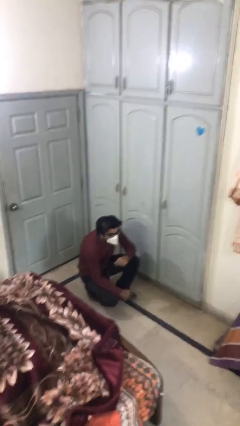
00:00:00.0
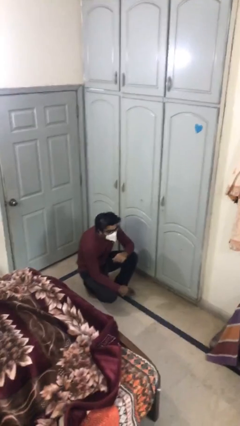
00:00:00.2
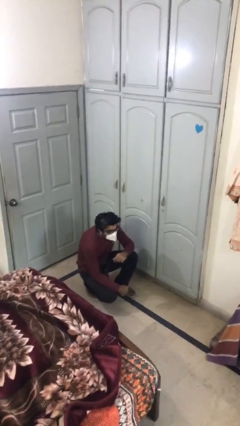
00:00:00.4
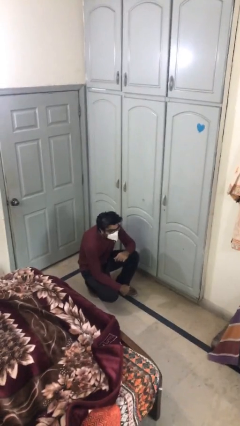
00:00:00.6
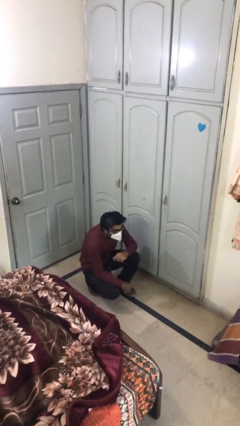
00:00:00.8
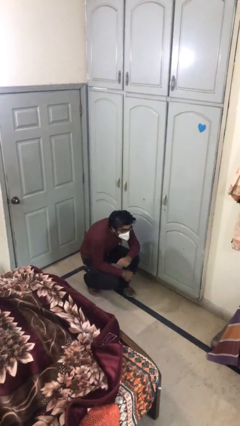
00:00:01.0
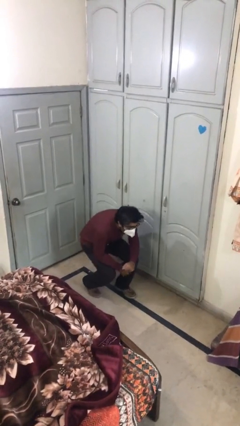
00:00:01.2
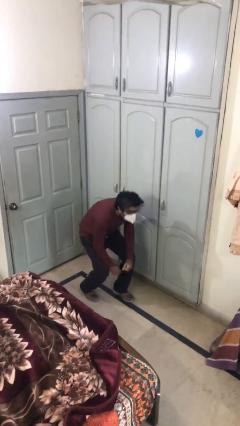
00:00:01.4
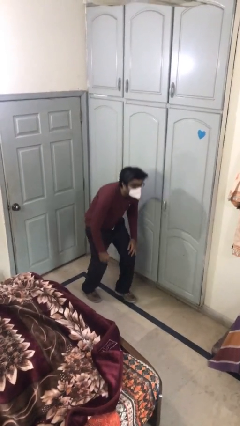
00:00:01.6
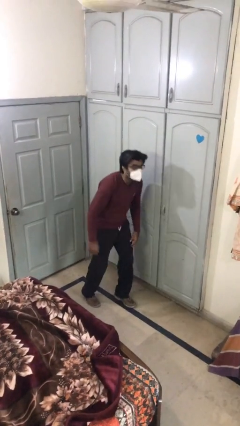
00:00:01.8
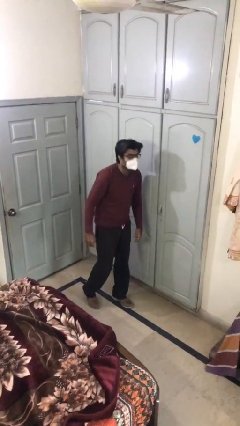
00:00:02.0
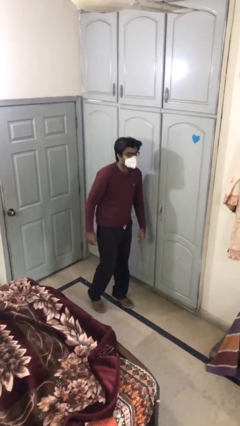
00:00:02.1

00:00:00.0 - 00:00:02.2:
person stands up

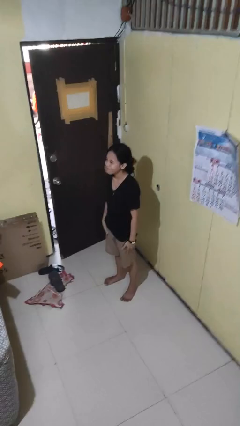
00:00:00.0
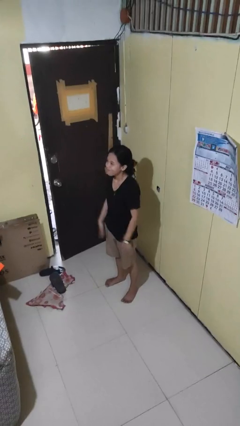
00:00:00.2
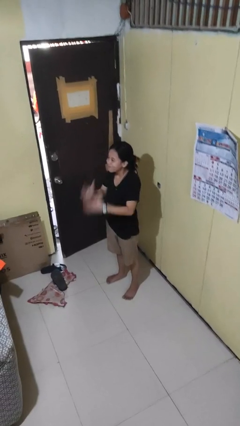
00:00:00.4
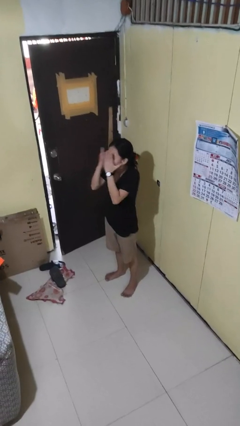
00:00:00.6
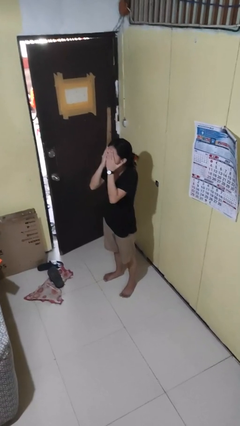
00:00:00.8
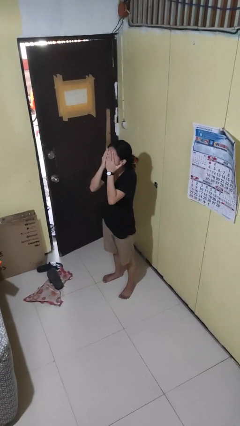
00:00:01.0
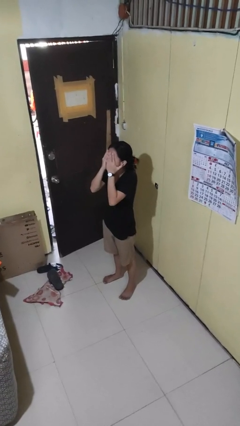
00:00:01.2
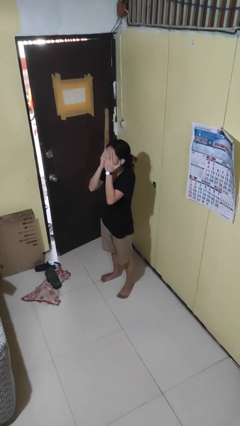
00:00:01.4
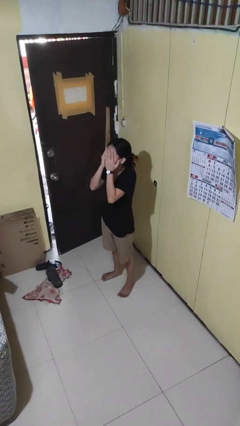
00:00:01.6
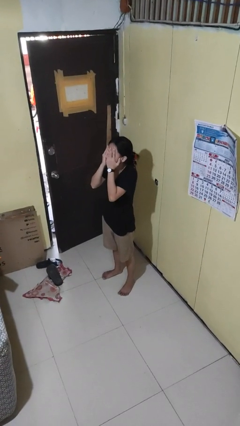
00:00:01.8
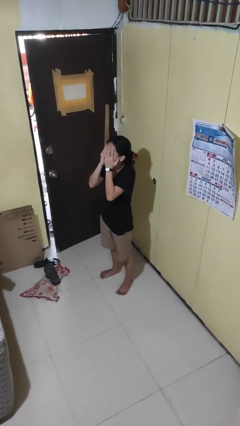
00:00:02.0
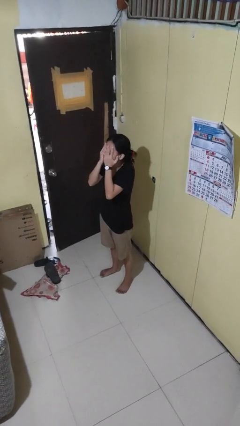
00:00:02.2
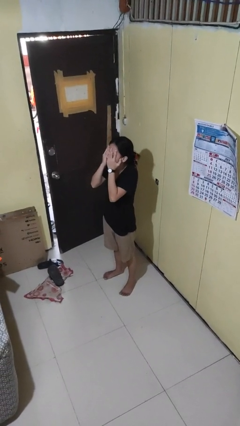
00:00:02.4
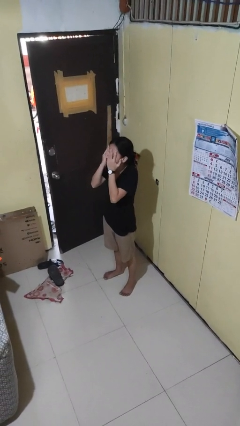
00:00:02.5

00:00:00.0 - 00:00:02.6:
person covers face with hands

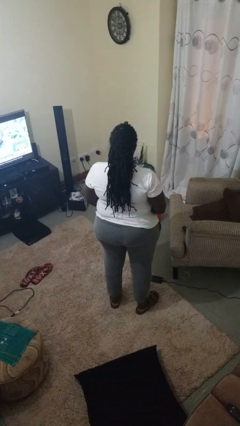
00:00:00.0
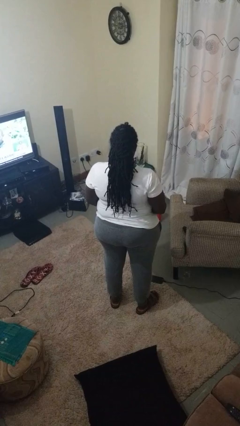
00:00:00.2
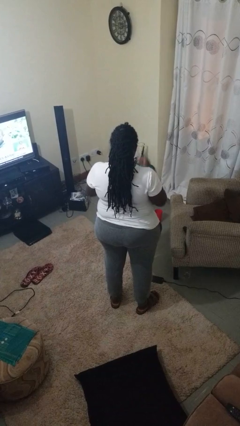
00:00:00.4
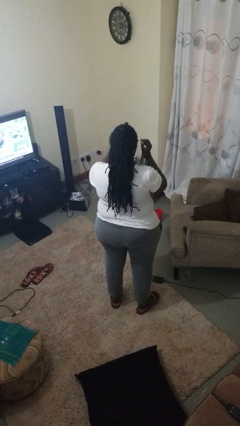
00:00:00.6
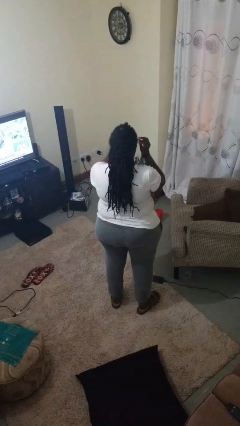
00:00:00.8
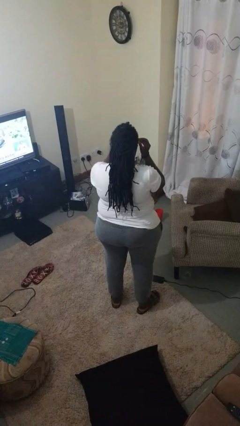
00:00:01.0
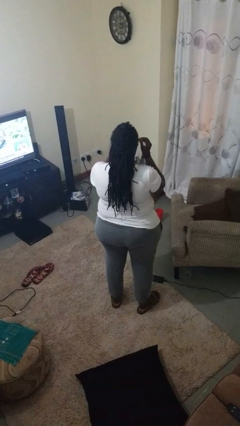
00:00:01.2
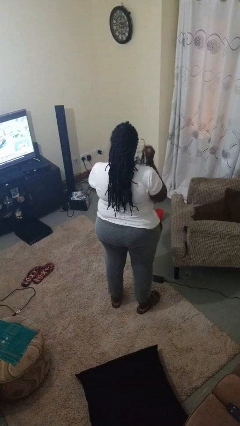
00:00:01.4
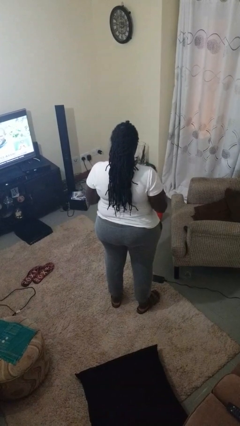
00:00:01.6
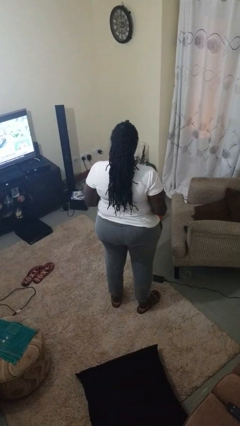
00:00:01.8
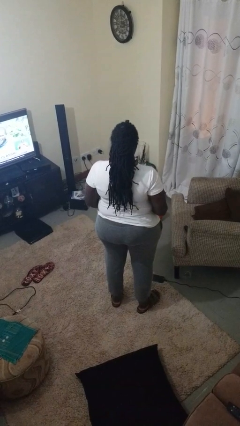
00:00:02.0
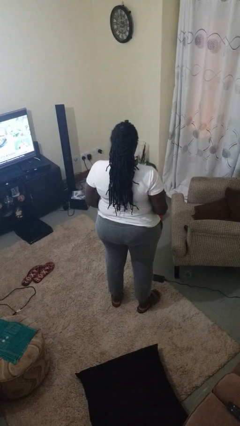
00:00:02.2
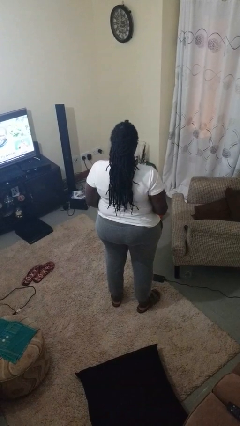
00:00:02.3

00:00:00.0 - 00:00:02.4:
person takes off sunglasses

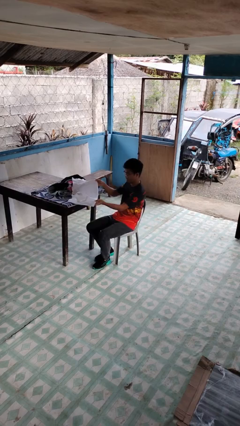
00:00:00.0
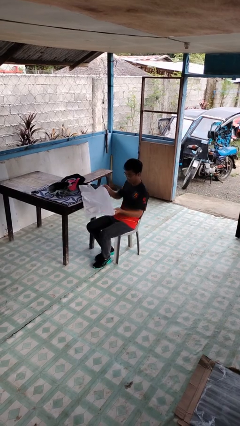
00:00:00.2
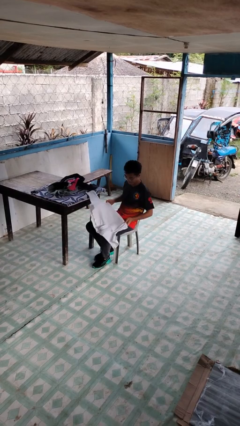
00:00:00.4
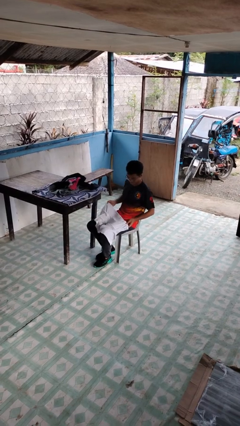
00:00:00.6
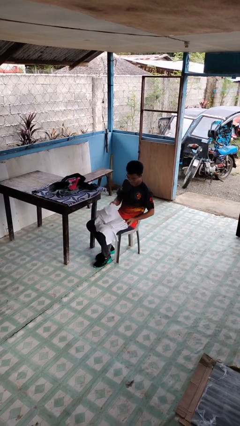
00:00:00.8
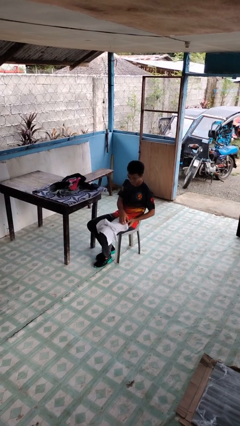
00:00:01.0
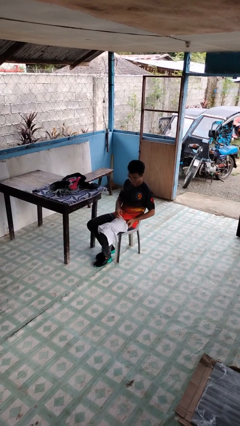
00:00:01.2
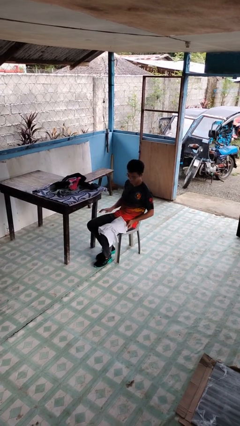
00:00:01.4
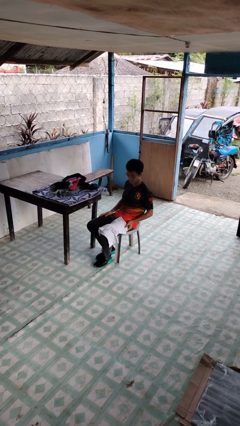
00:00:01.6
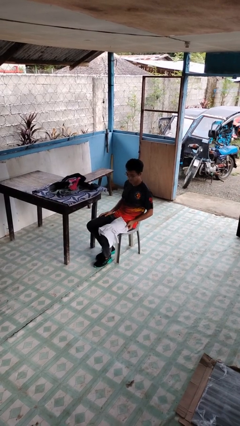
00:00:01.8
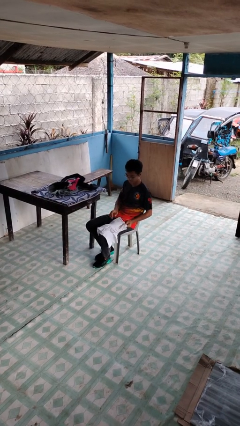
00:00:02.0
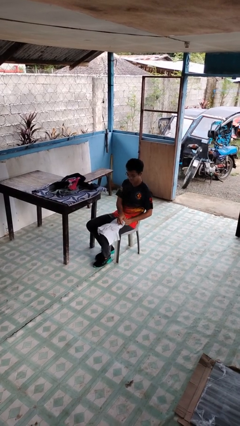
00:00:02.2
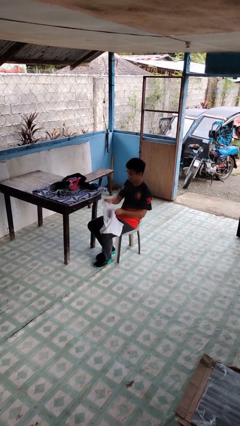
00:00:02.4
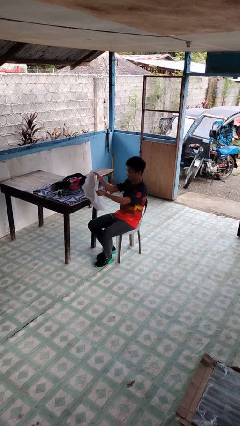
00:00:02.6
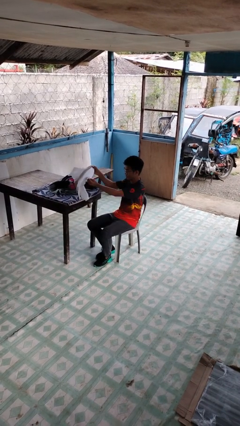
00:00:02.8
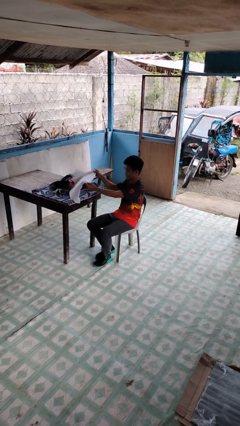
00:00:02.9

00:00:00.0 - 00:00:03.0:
person folds shirt

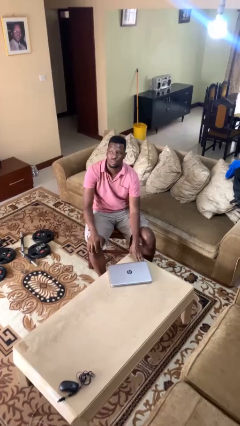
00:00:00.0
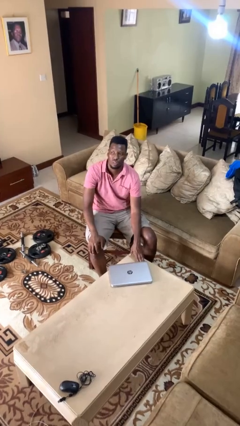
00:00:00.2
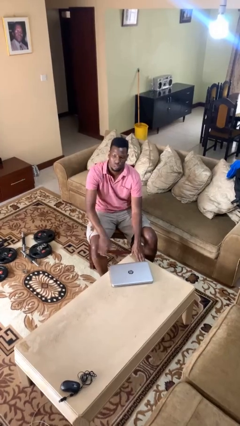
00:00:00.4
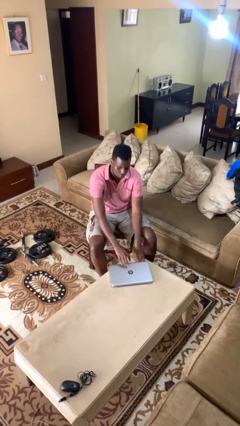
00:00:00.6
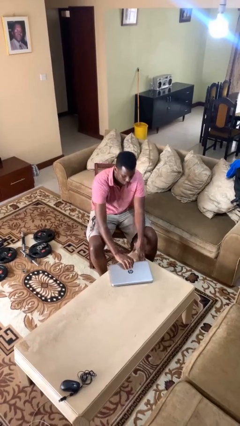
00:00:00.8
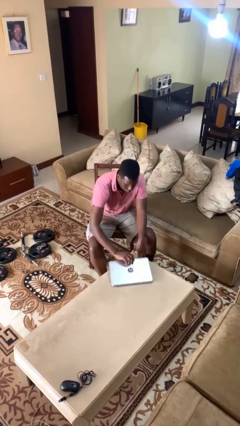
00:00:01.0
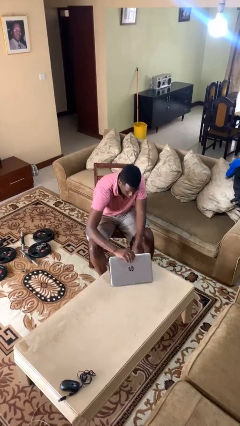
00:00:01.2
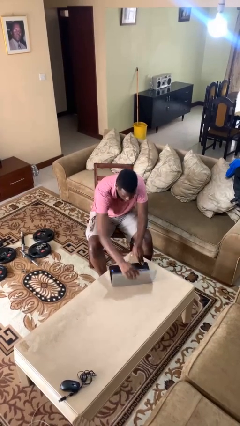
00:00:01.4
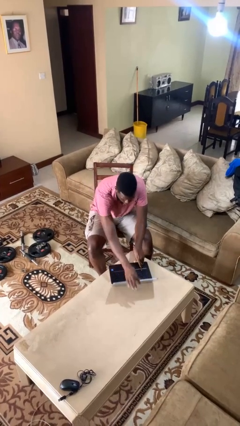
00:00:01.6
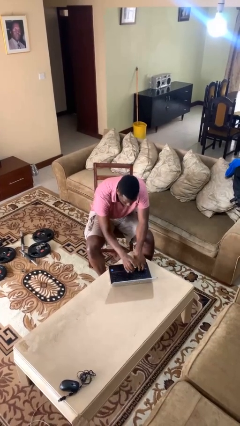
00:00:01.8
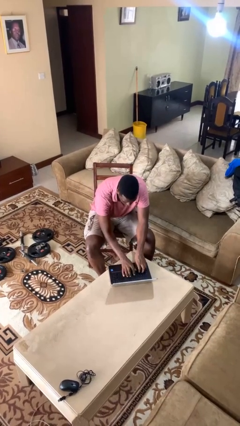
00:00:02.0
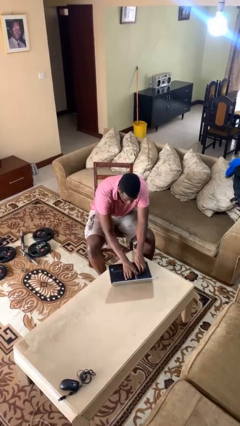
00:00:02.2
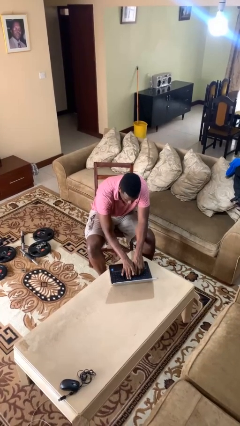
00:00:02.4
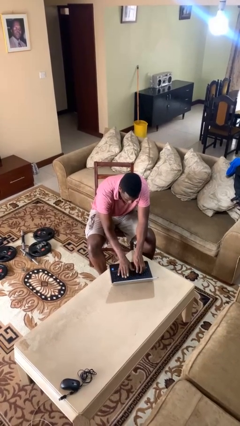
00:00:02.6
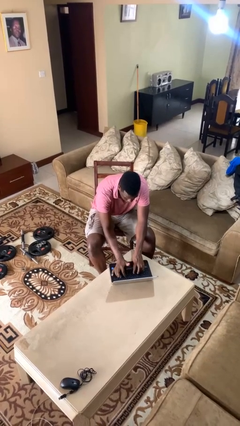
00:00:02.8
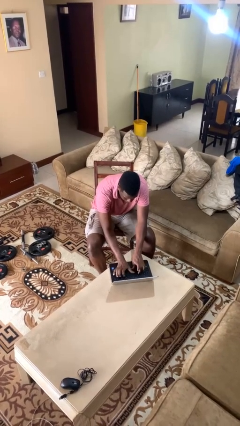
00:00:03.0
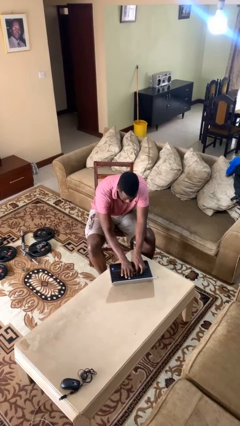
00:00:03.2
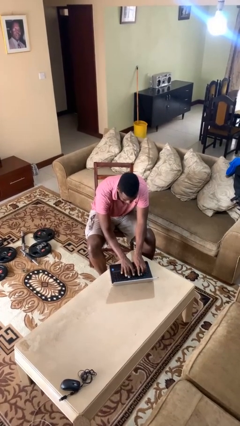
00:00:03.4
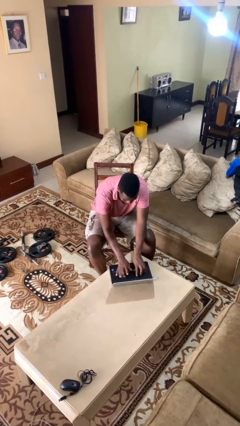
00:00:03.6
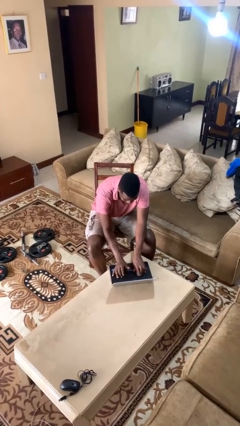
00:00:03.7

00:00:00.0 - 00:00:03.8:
person interacts with laptop

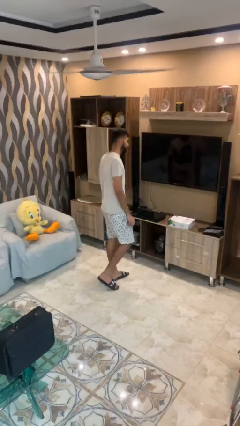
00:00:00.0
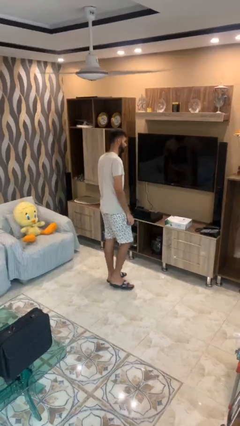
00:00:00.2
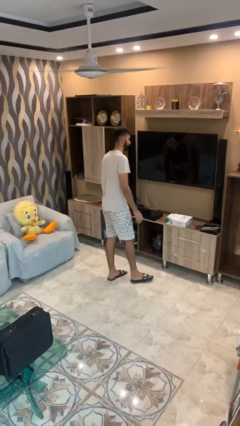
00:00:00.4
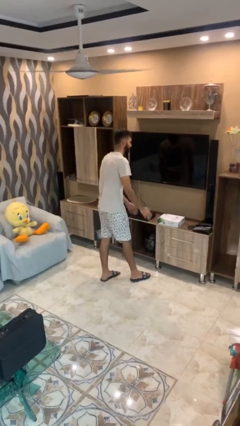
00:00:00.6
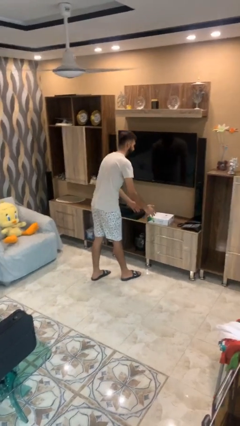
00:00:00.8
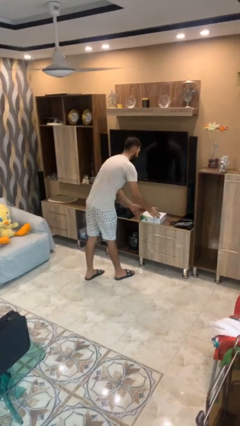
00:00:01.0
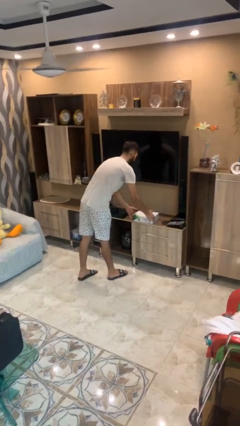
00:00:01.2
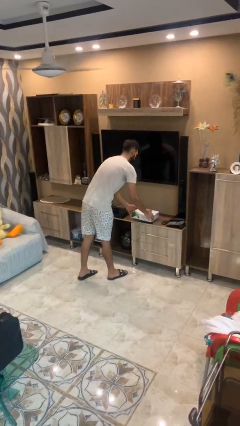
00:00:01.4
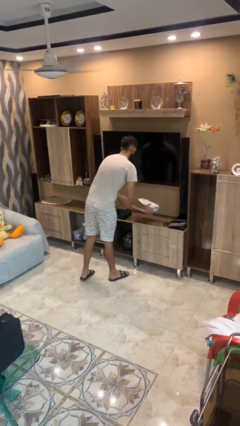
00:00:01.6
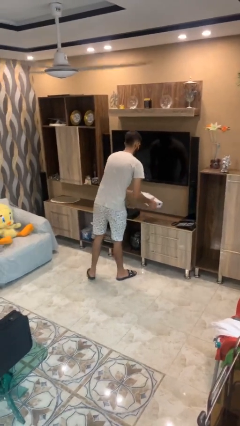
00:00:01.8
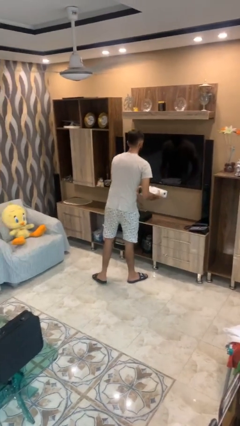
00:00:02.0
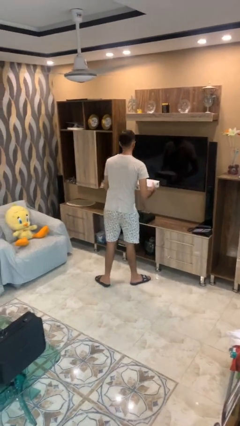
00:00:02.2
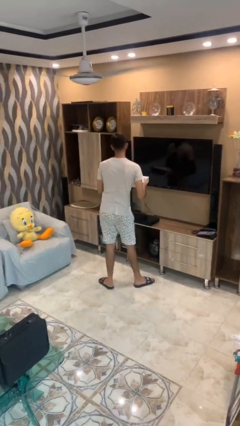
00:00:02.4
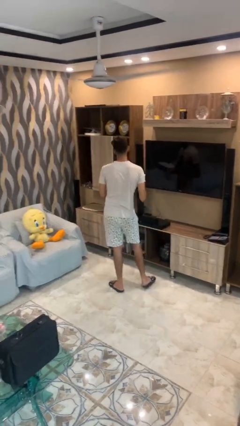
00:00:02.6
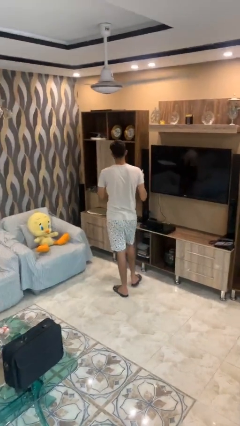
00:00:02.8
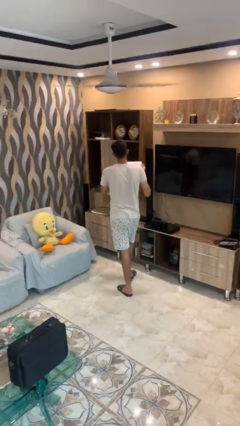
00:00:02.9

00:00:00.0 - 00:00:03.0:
person picks up object from table

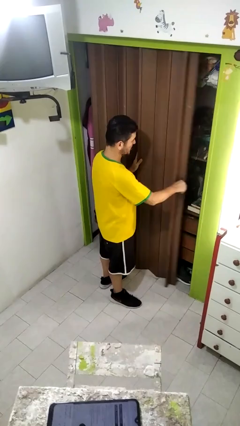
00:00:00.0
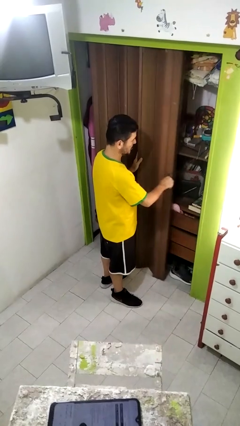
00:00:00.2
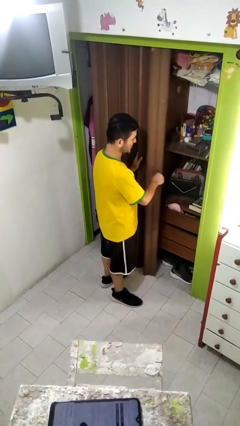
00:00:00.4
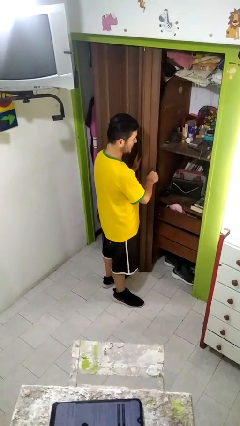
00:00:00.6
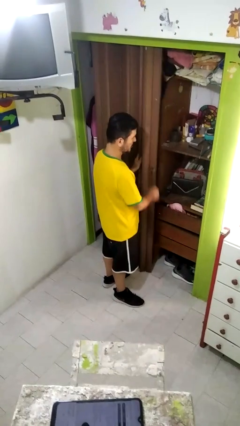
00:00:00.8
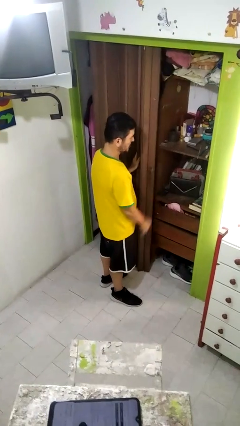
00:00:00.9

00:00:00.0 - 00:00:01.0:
person opens closet door
